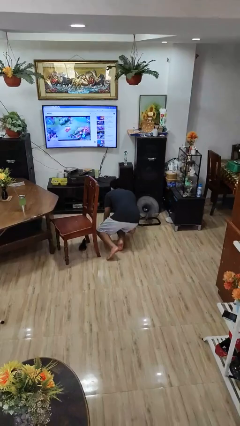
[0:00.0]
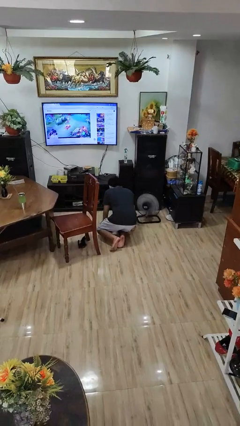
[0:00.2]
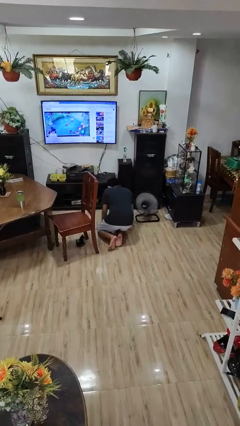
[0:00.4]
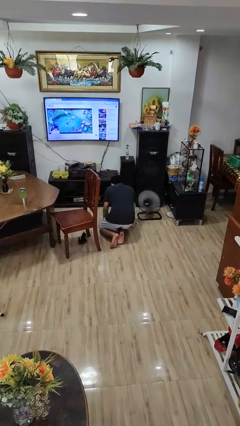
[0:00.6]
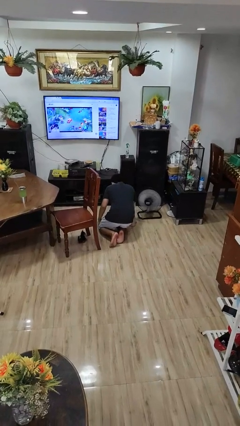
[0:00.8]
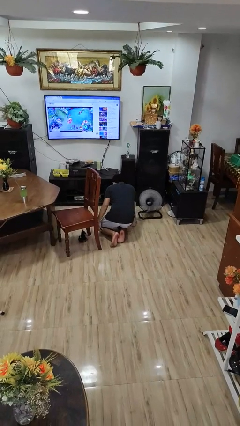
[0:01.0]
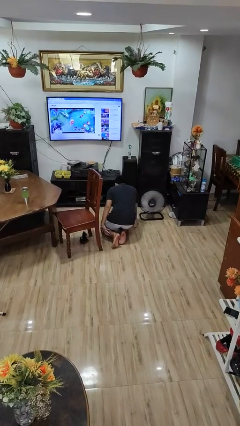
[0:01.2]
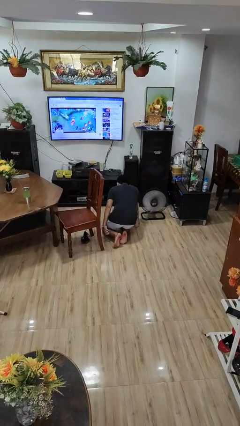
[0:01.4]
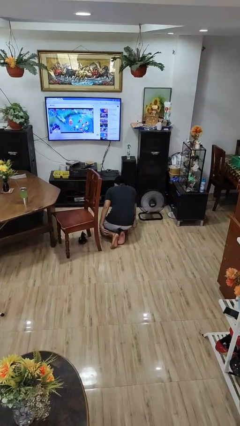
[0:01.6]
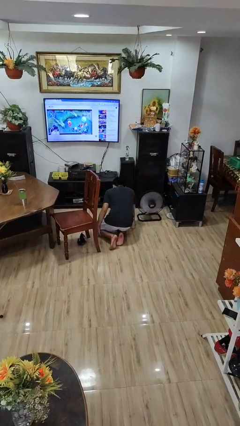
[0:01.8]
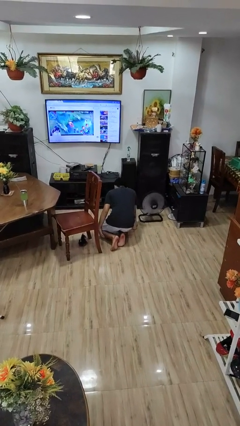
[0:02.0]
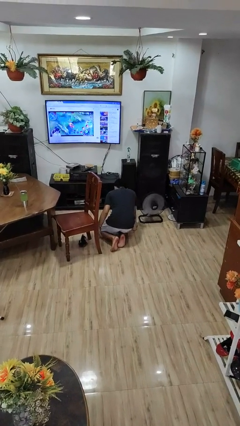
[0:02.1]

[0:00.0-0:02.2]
person lies down on floor

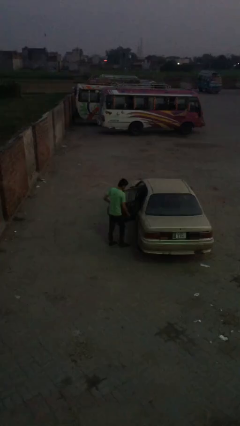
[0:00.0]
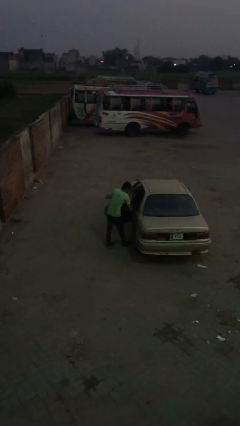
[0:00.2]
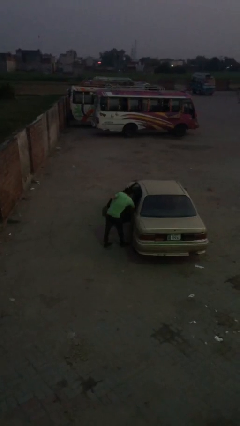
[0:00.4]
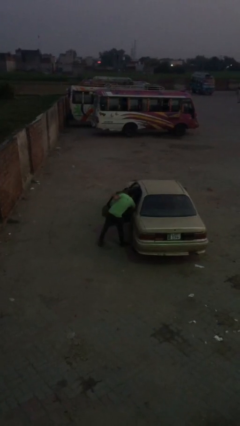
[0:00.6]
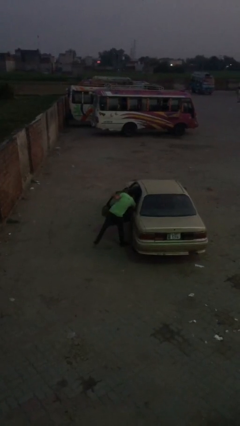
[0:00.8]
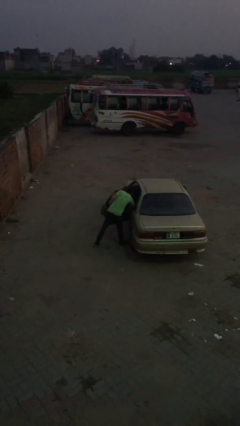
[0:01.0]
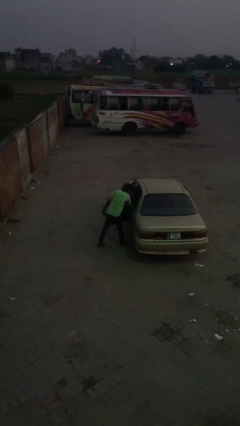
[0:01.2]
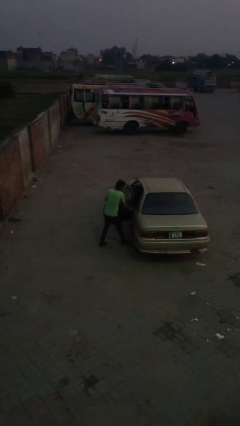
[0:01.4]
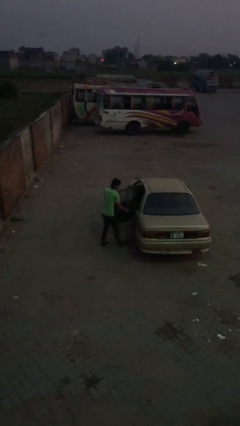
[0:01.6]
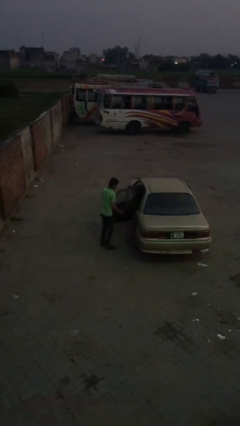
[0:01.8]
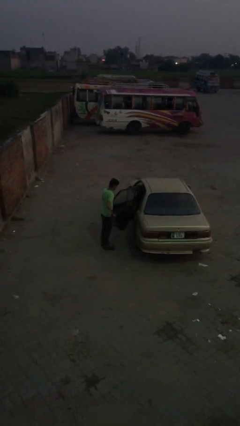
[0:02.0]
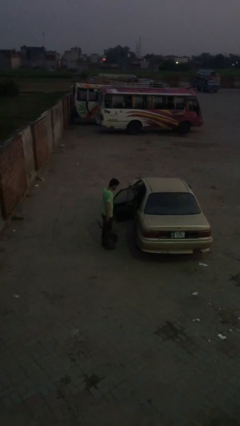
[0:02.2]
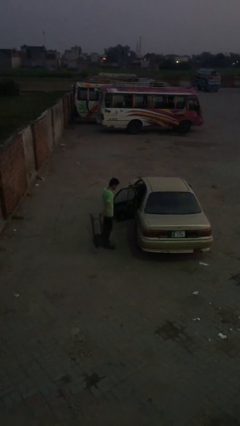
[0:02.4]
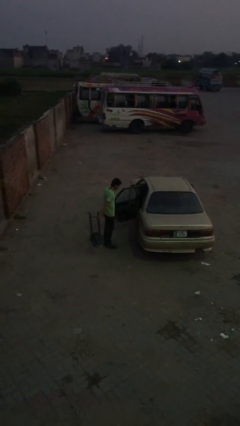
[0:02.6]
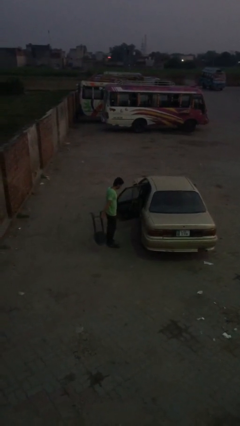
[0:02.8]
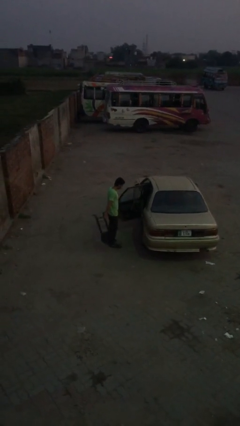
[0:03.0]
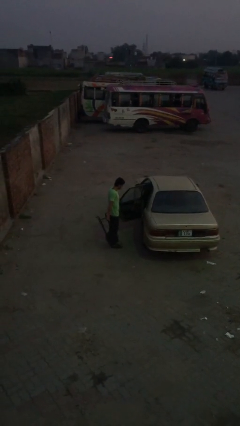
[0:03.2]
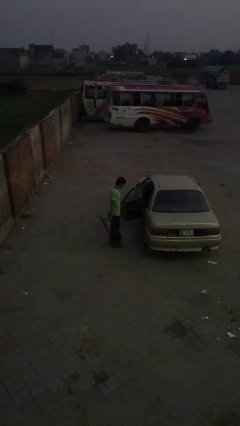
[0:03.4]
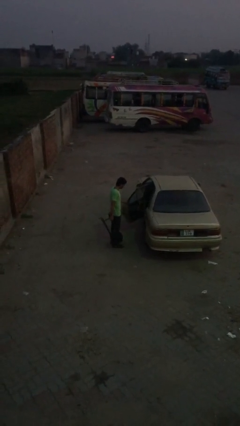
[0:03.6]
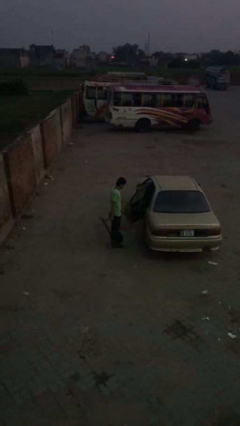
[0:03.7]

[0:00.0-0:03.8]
person unloads car

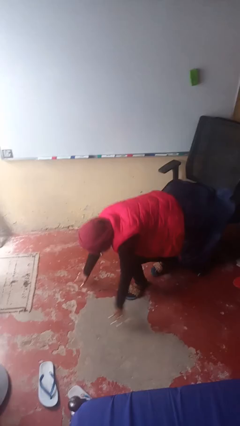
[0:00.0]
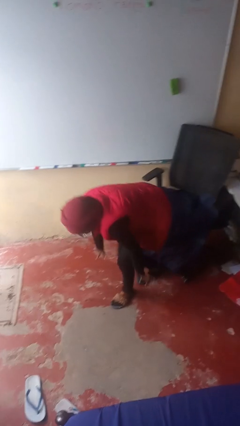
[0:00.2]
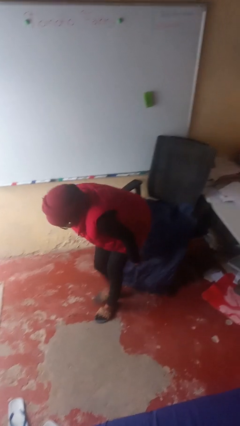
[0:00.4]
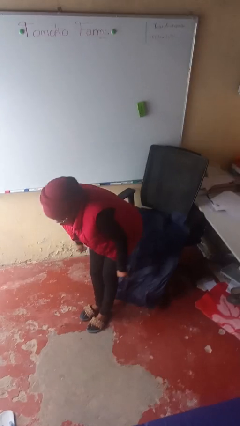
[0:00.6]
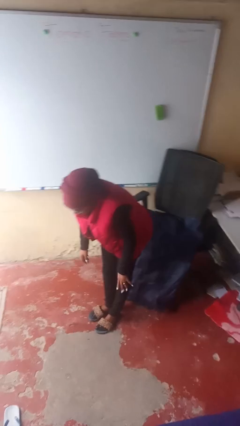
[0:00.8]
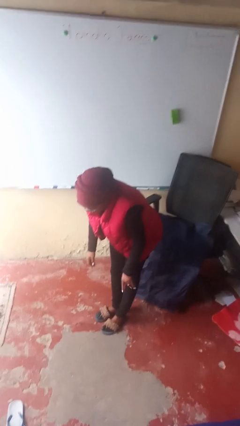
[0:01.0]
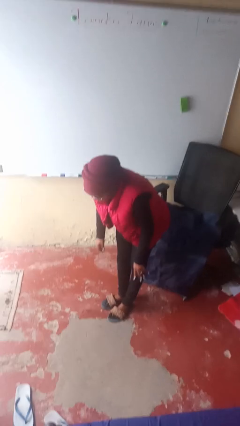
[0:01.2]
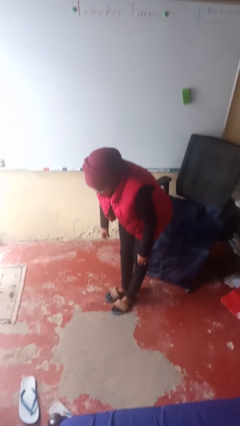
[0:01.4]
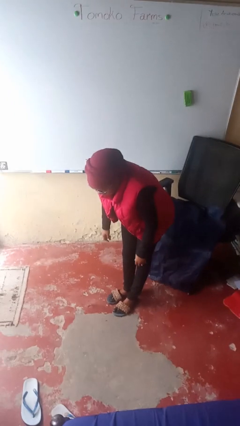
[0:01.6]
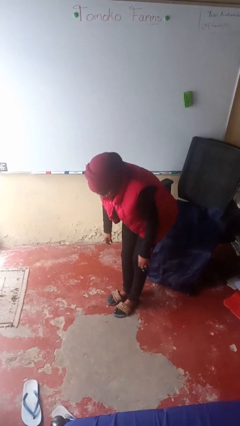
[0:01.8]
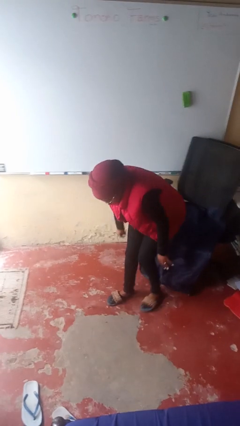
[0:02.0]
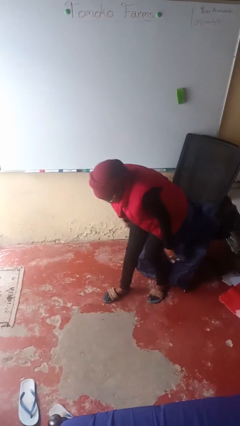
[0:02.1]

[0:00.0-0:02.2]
person stands up from floor

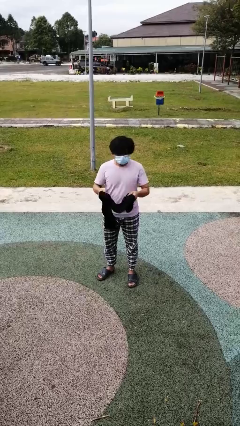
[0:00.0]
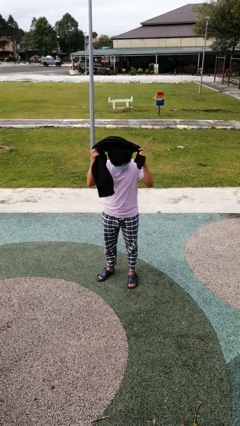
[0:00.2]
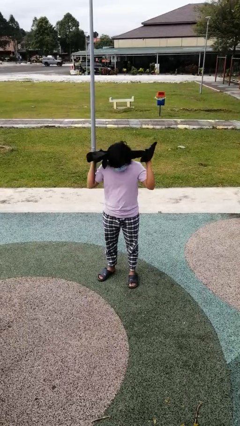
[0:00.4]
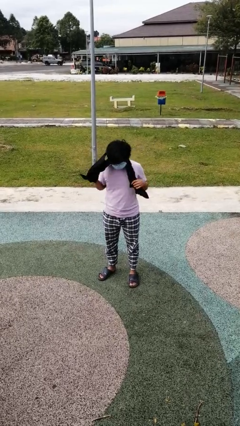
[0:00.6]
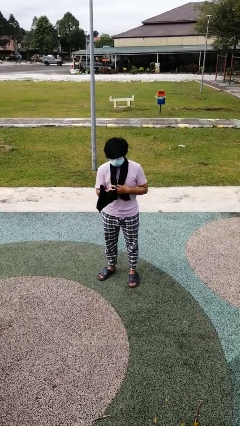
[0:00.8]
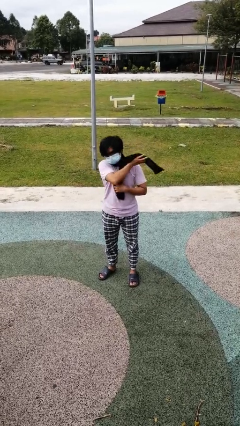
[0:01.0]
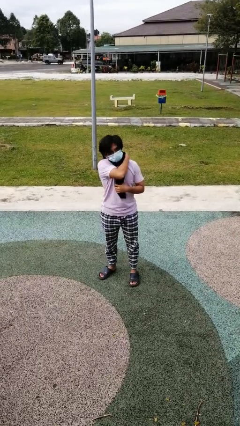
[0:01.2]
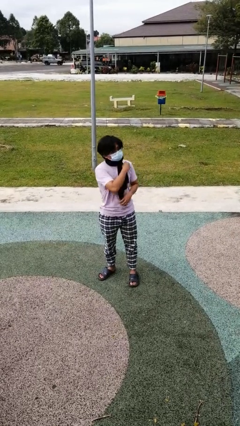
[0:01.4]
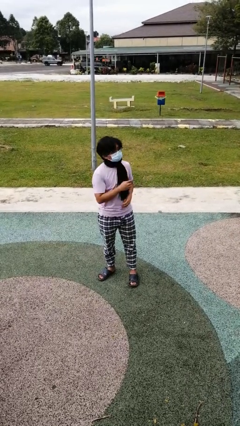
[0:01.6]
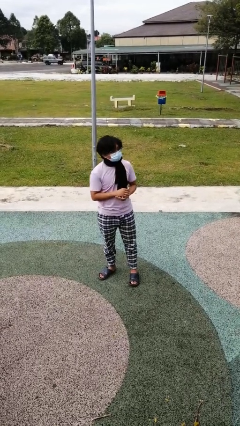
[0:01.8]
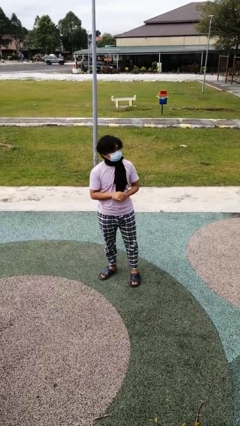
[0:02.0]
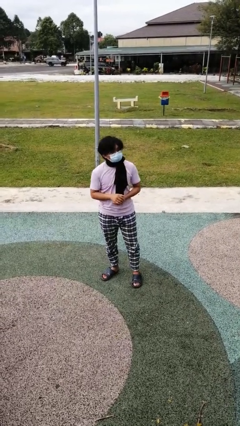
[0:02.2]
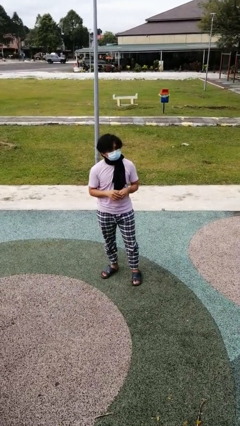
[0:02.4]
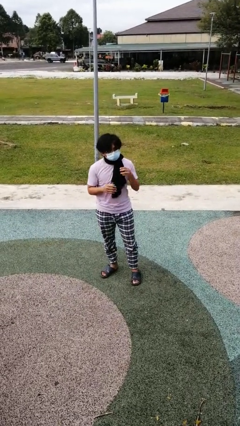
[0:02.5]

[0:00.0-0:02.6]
person puts on scarf

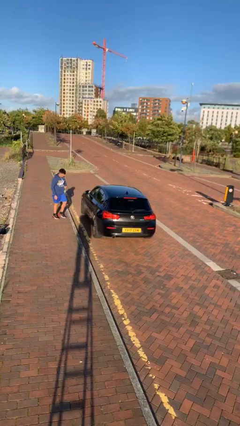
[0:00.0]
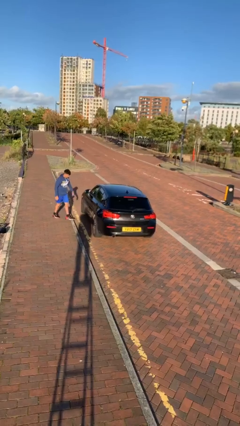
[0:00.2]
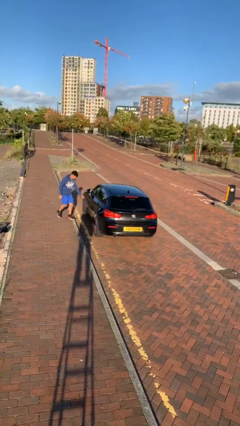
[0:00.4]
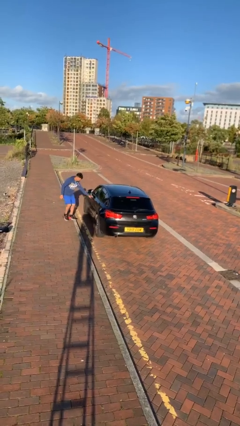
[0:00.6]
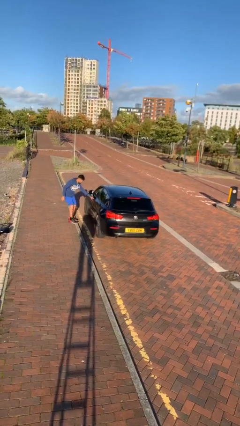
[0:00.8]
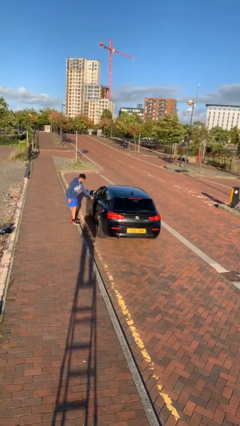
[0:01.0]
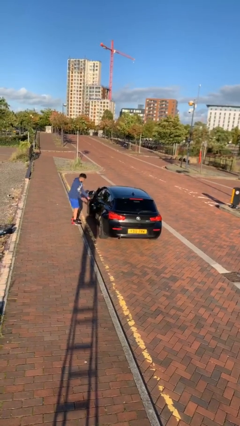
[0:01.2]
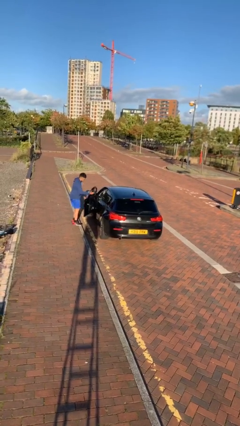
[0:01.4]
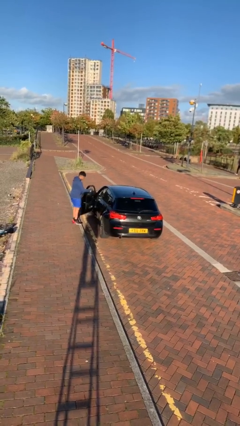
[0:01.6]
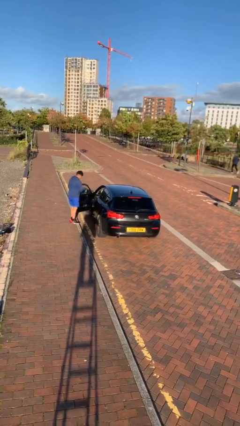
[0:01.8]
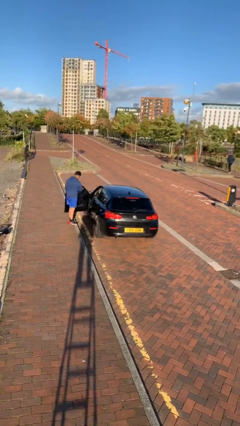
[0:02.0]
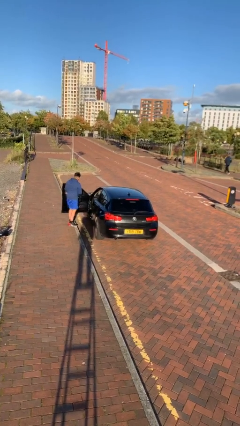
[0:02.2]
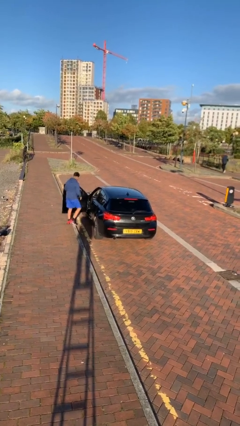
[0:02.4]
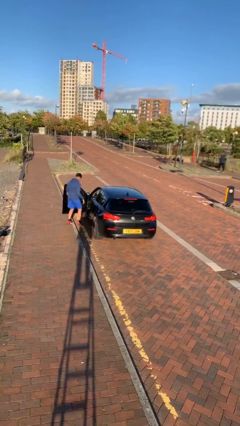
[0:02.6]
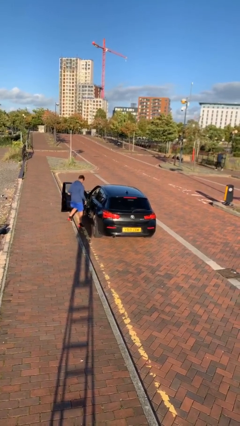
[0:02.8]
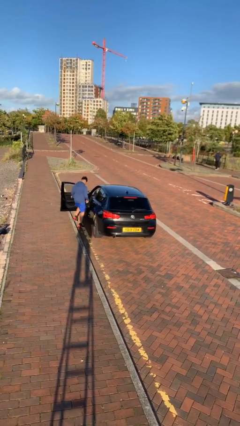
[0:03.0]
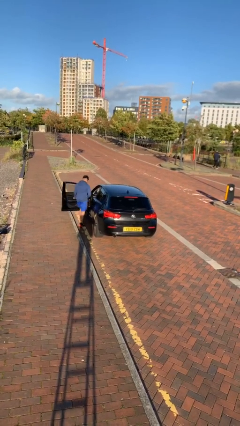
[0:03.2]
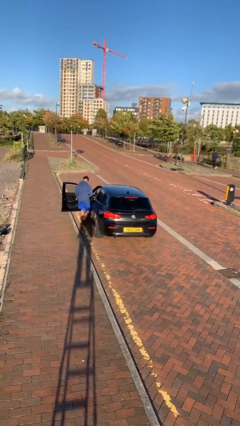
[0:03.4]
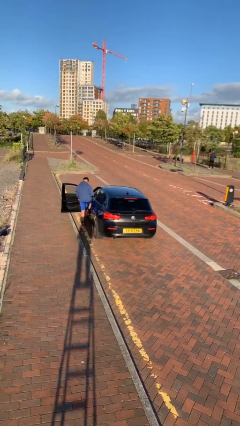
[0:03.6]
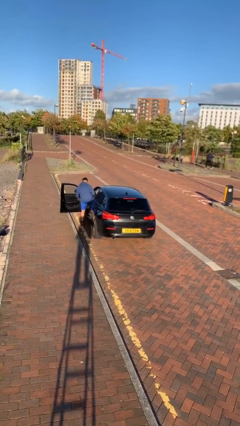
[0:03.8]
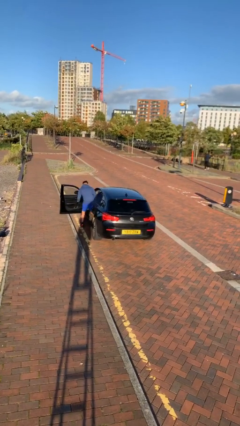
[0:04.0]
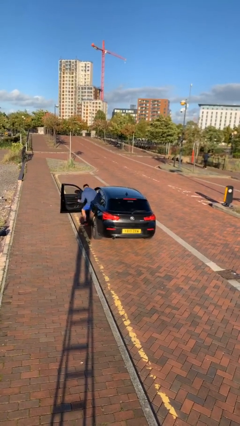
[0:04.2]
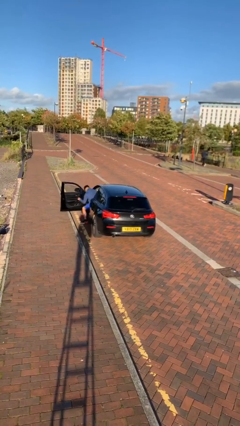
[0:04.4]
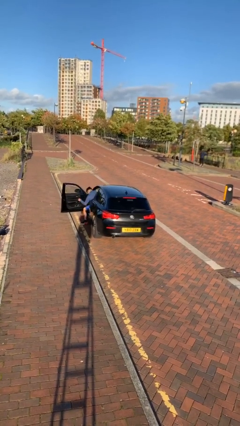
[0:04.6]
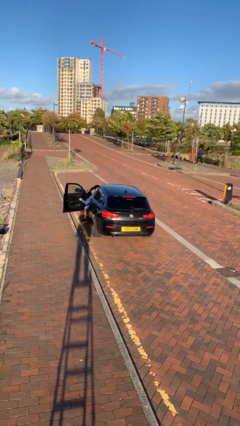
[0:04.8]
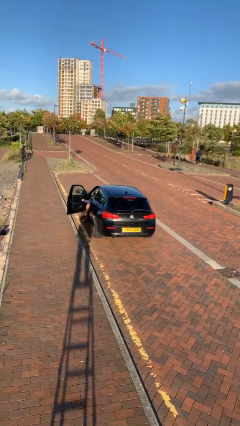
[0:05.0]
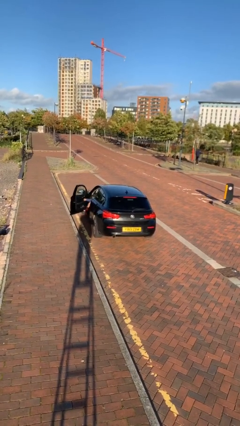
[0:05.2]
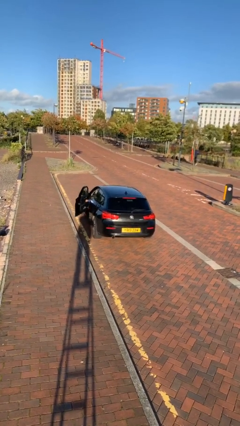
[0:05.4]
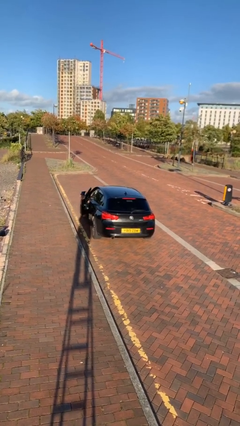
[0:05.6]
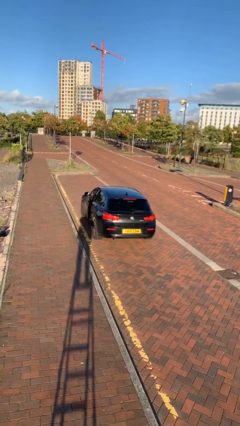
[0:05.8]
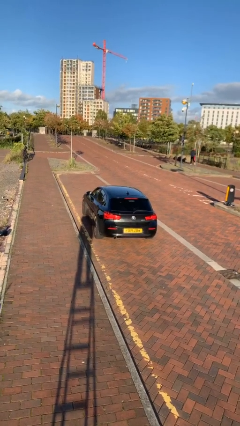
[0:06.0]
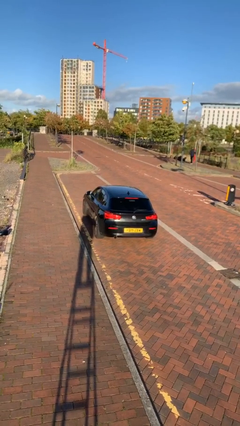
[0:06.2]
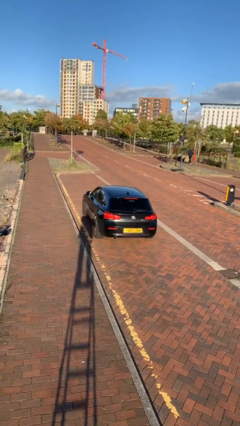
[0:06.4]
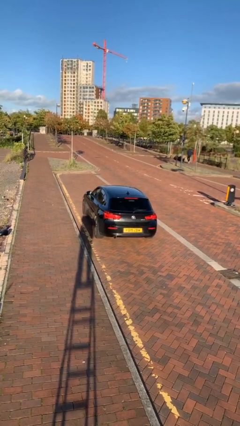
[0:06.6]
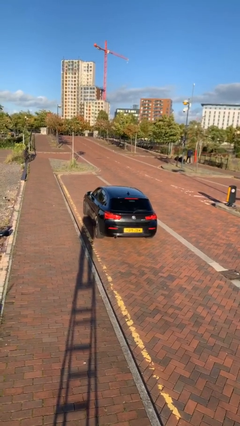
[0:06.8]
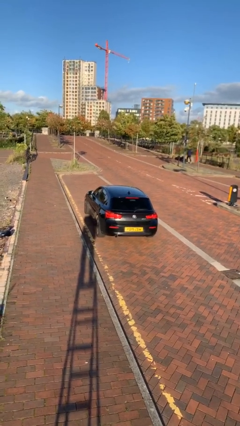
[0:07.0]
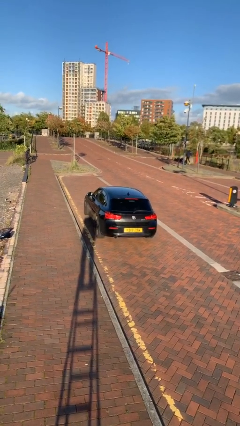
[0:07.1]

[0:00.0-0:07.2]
car picks up person
